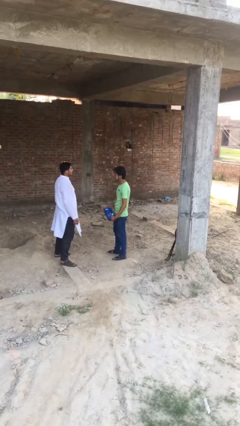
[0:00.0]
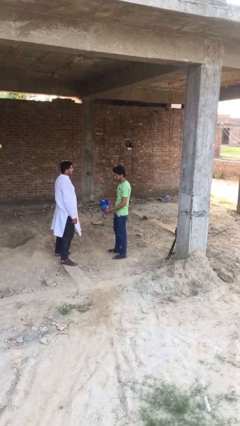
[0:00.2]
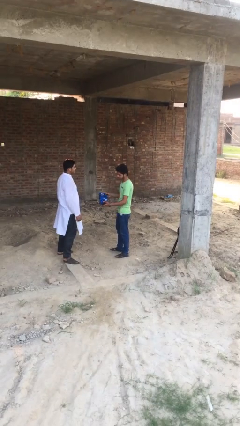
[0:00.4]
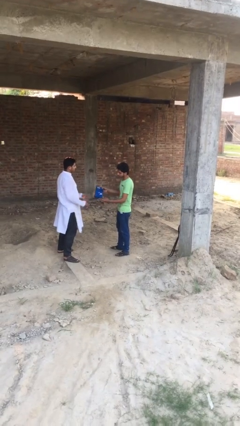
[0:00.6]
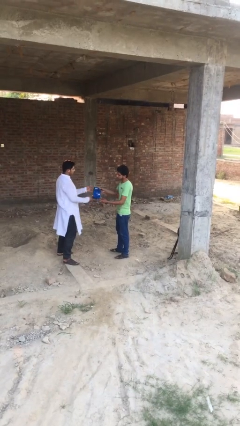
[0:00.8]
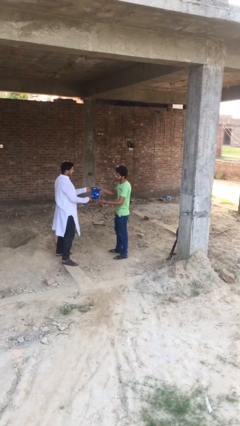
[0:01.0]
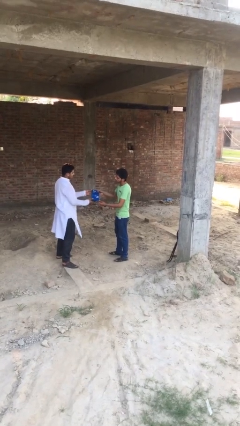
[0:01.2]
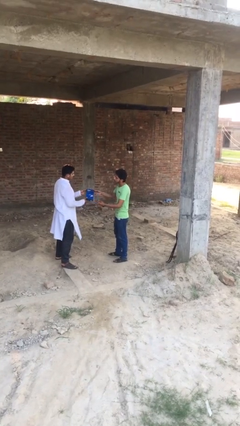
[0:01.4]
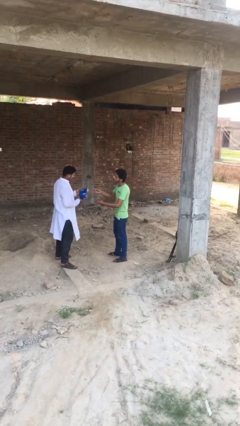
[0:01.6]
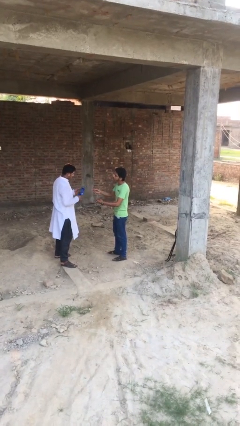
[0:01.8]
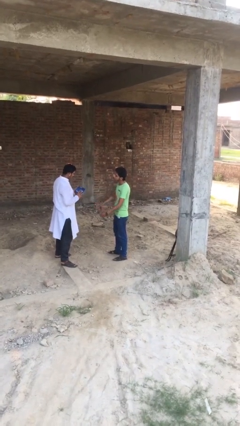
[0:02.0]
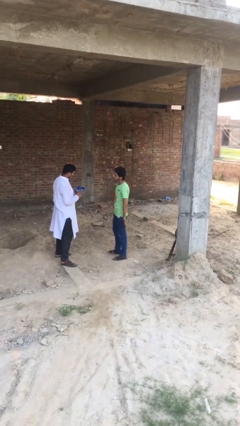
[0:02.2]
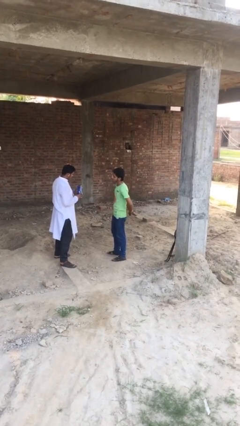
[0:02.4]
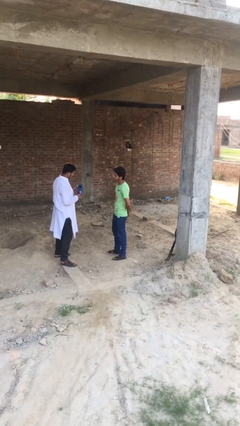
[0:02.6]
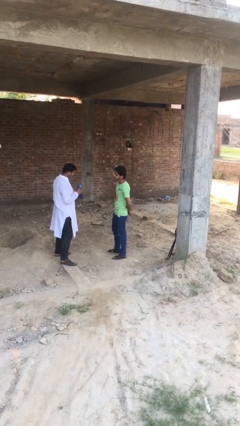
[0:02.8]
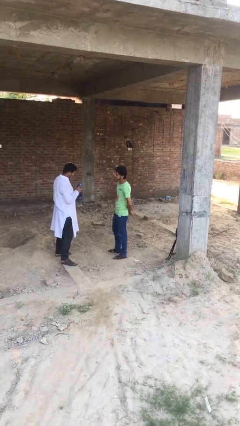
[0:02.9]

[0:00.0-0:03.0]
person transfers object to person

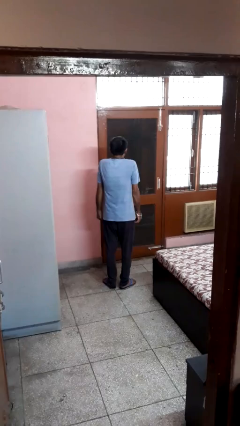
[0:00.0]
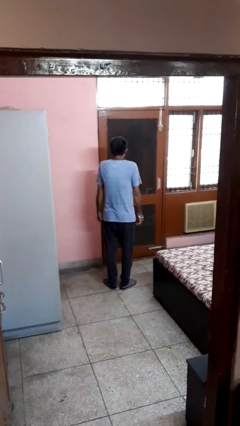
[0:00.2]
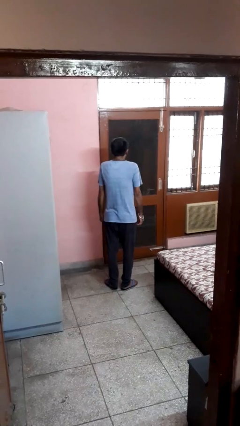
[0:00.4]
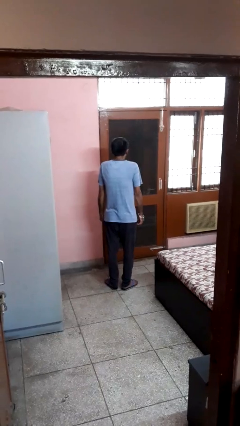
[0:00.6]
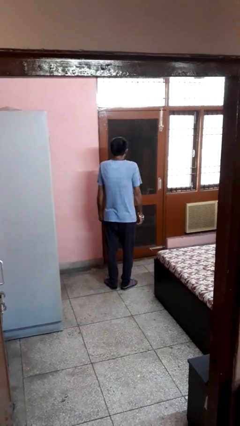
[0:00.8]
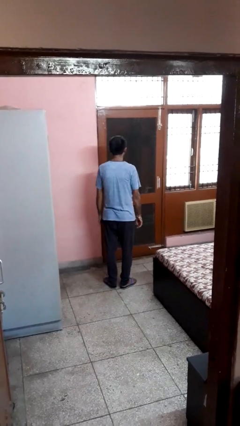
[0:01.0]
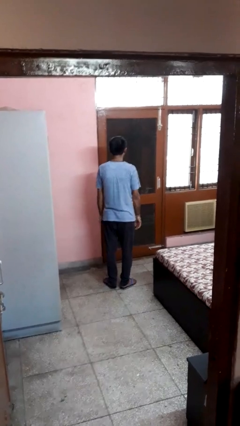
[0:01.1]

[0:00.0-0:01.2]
person shrugs

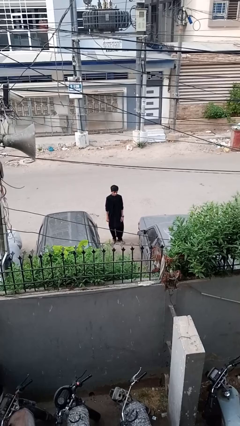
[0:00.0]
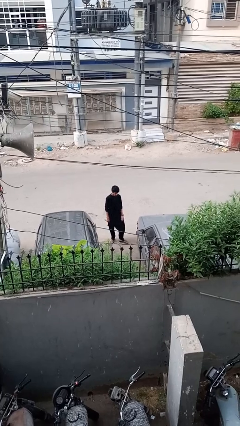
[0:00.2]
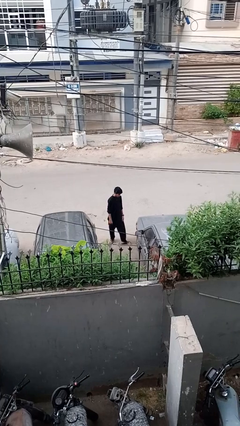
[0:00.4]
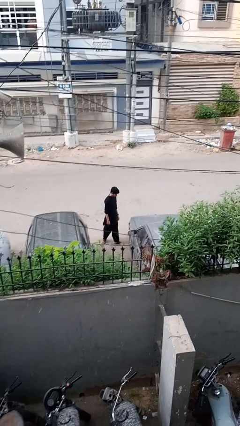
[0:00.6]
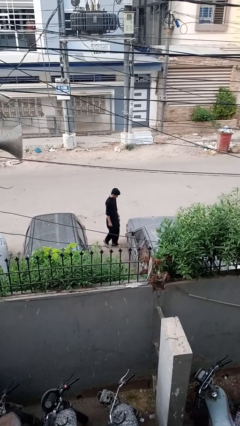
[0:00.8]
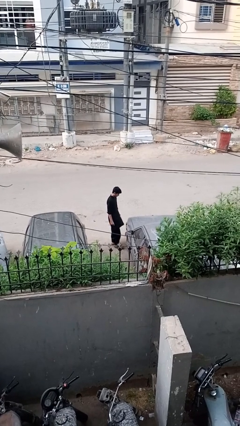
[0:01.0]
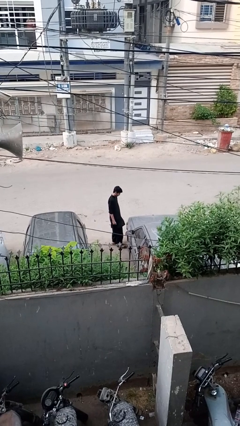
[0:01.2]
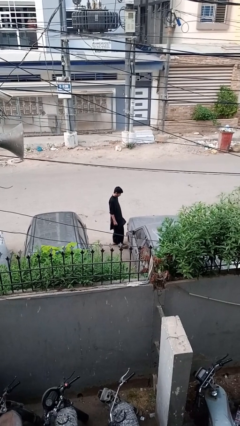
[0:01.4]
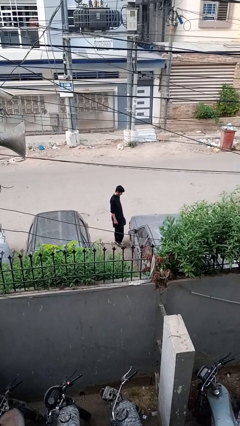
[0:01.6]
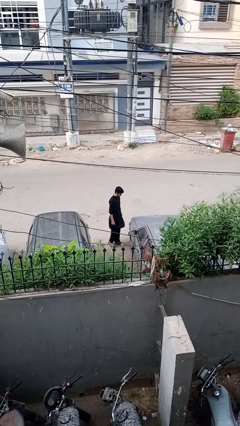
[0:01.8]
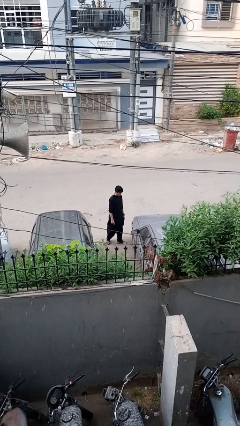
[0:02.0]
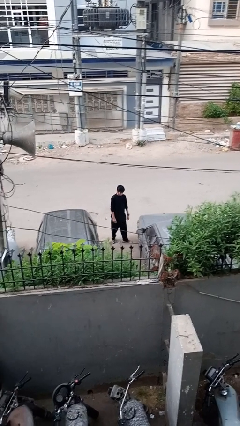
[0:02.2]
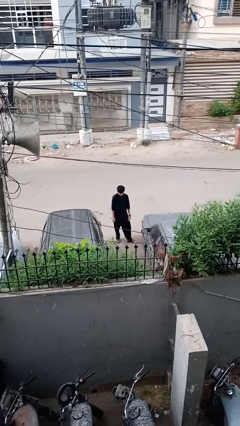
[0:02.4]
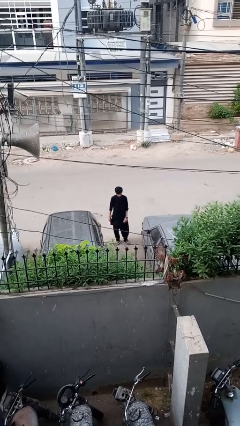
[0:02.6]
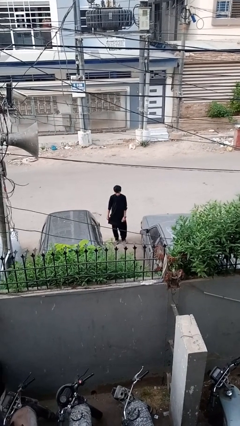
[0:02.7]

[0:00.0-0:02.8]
person kicks car tires

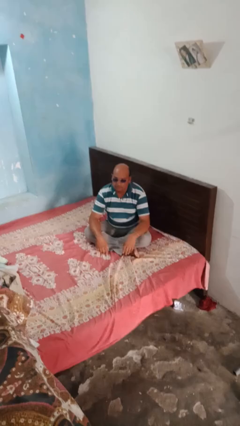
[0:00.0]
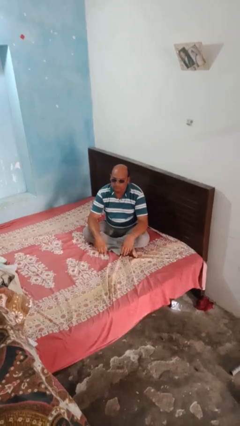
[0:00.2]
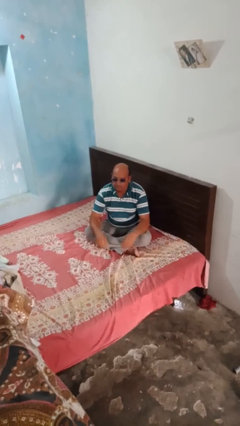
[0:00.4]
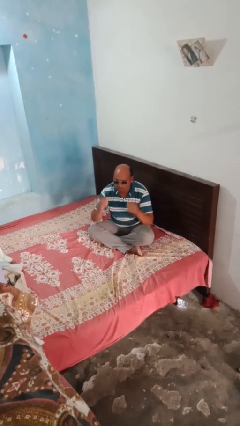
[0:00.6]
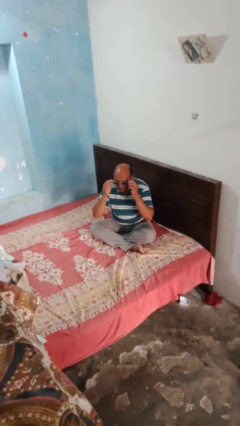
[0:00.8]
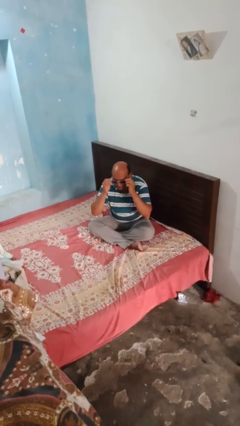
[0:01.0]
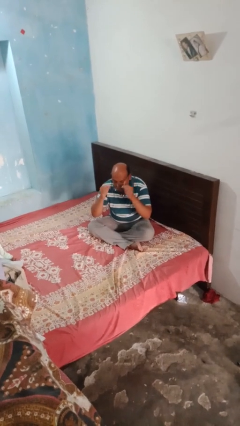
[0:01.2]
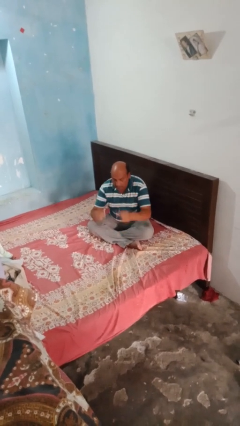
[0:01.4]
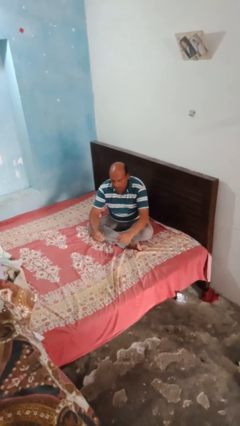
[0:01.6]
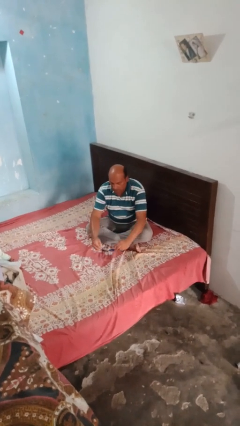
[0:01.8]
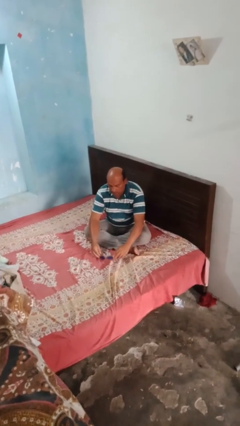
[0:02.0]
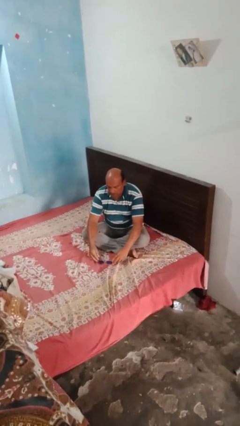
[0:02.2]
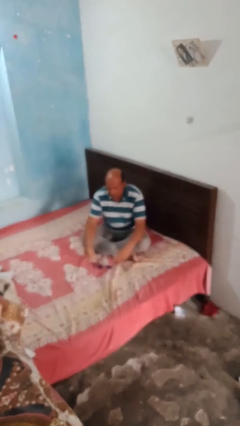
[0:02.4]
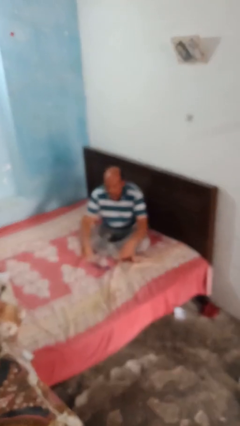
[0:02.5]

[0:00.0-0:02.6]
person takes off sunglasses

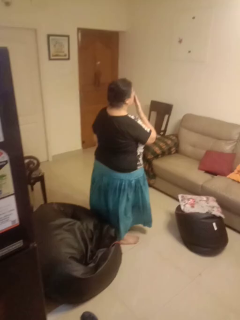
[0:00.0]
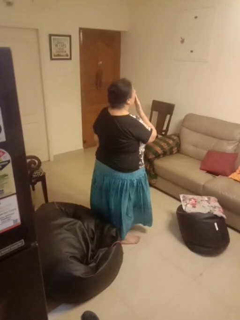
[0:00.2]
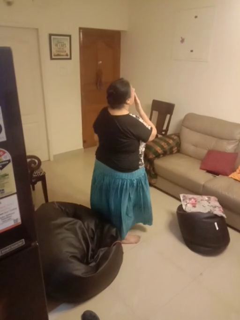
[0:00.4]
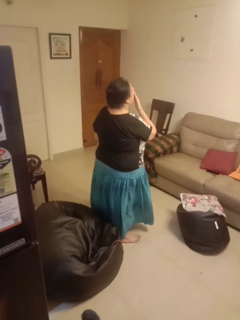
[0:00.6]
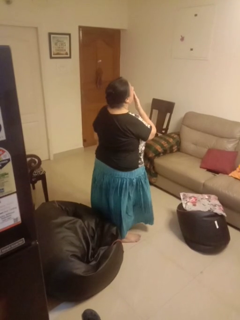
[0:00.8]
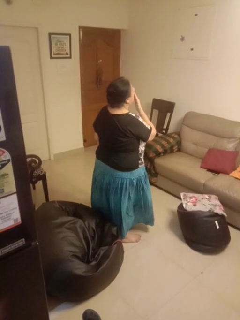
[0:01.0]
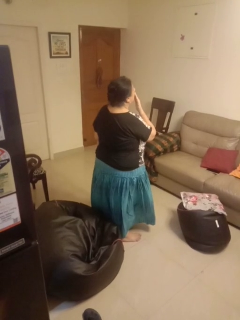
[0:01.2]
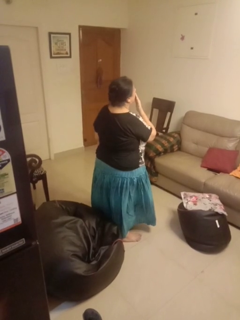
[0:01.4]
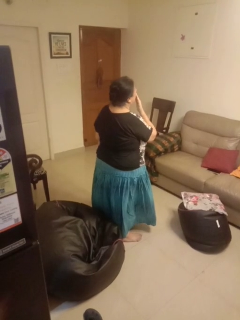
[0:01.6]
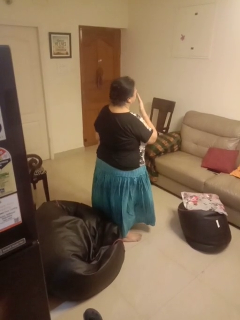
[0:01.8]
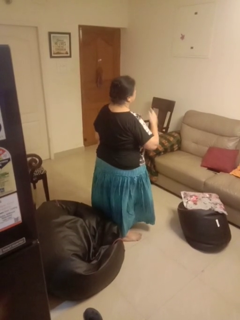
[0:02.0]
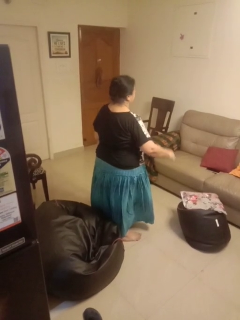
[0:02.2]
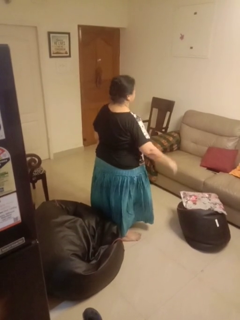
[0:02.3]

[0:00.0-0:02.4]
person yawns

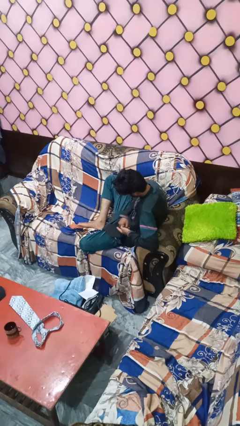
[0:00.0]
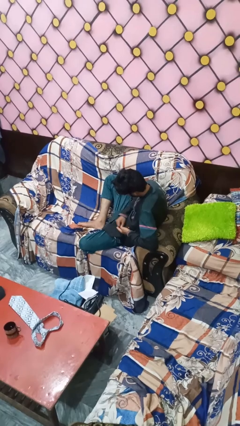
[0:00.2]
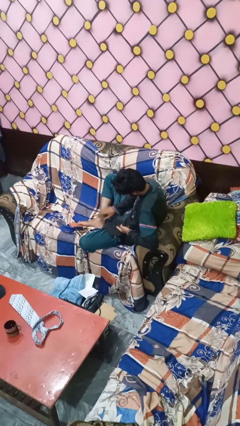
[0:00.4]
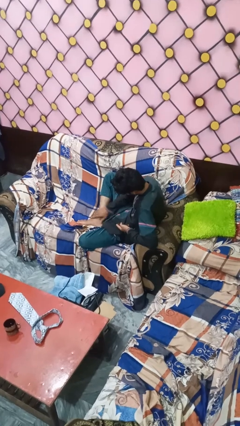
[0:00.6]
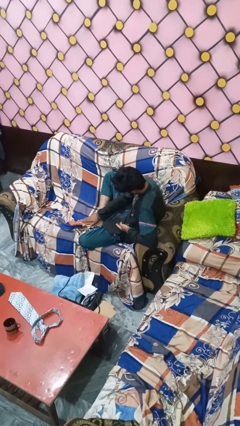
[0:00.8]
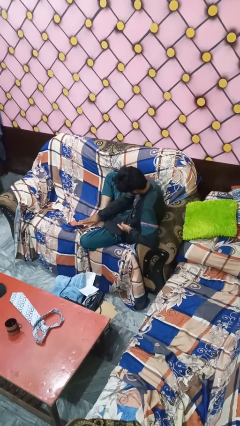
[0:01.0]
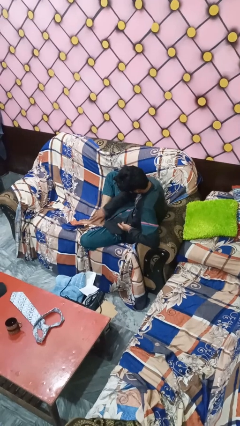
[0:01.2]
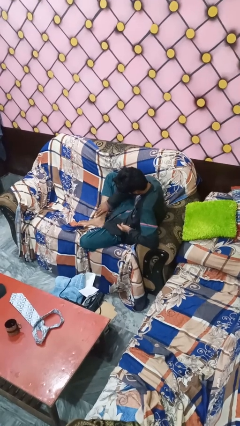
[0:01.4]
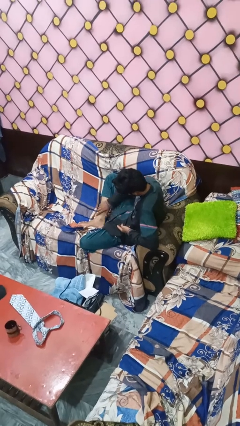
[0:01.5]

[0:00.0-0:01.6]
person rubs foot

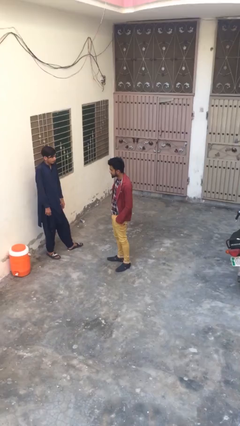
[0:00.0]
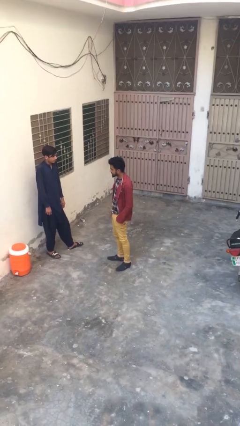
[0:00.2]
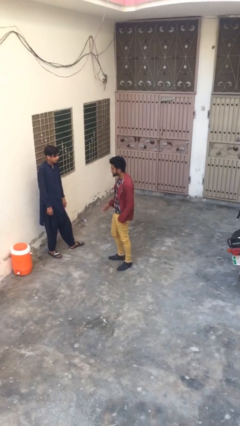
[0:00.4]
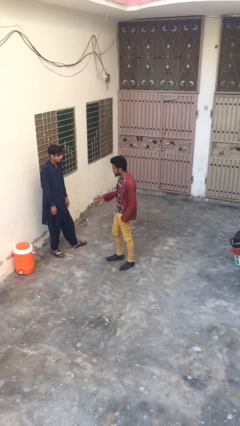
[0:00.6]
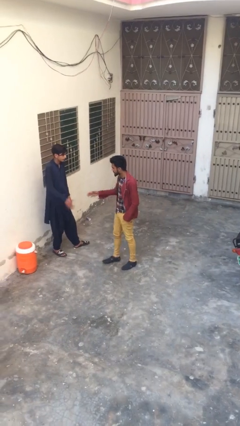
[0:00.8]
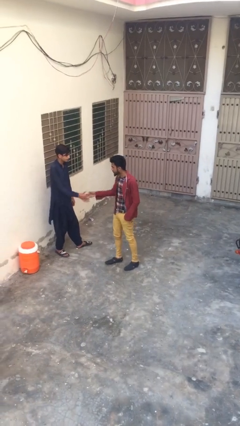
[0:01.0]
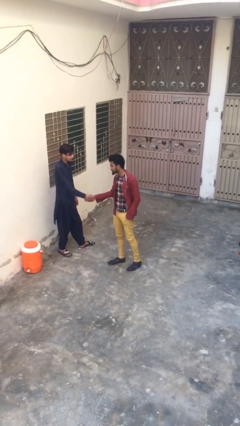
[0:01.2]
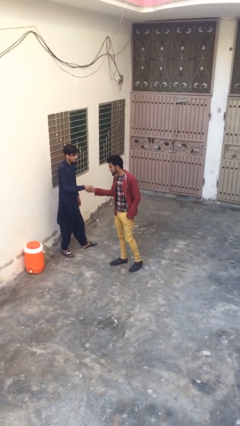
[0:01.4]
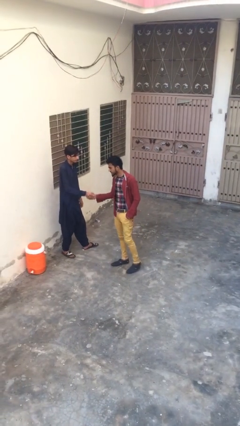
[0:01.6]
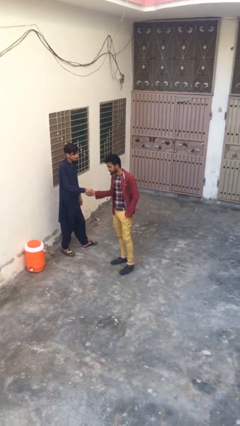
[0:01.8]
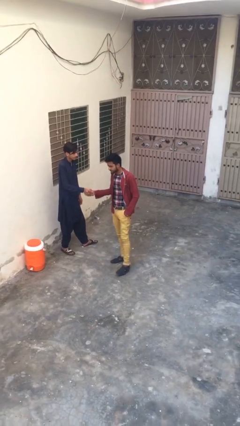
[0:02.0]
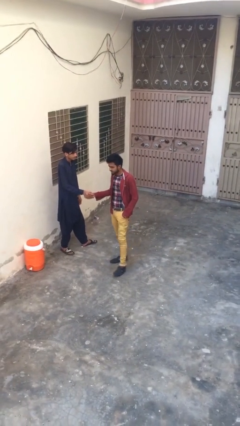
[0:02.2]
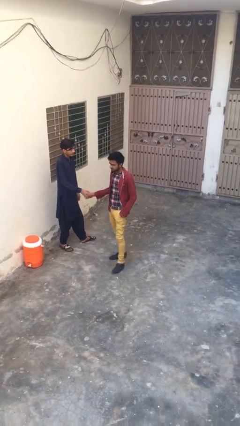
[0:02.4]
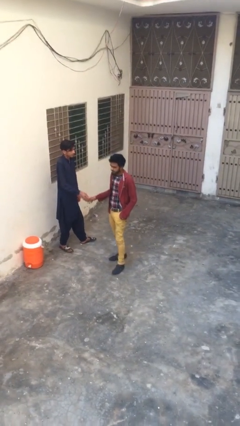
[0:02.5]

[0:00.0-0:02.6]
person shakes hand

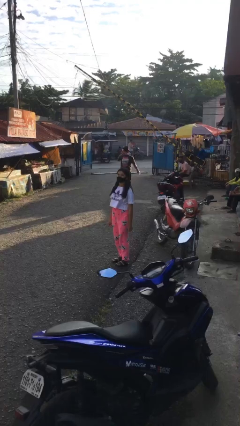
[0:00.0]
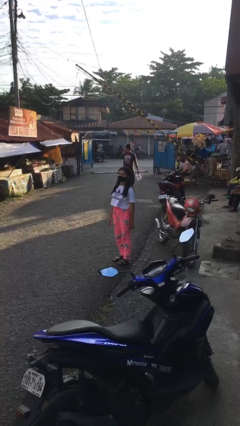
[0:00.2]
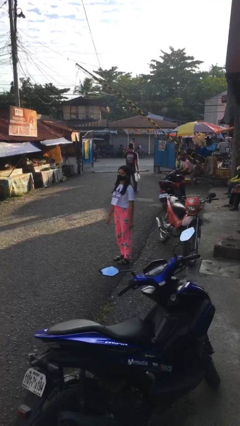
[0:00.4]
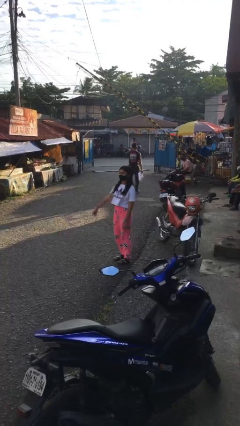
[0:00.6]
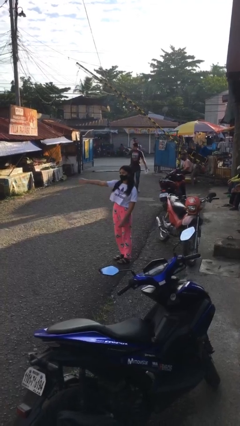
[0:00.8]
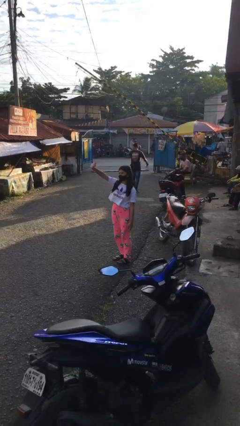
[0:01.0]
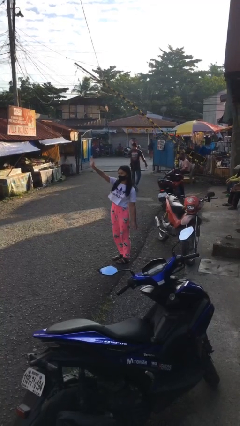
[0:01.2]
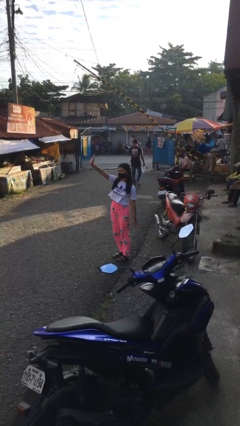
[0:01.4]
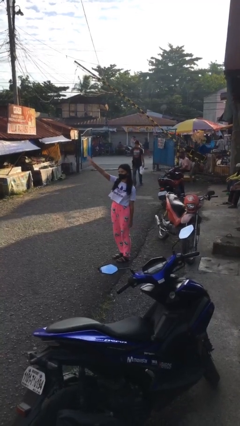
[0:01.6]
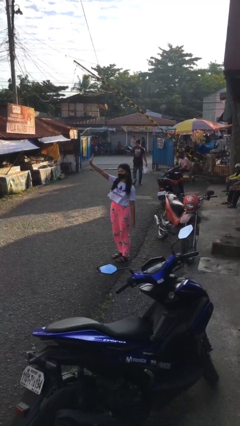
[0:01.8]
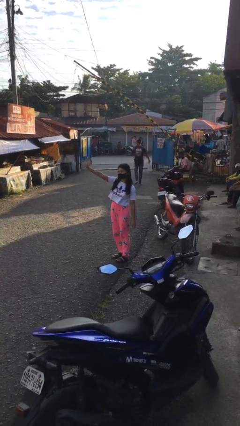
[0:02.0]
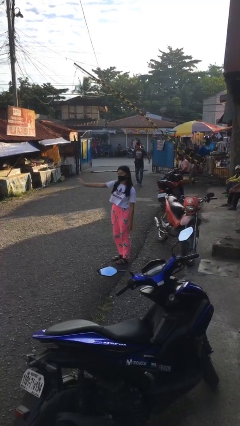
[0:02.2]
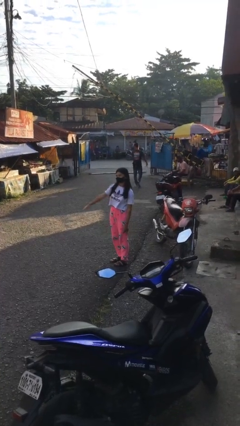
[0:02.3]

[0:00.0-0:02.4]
person waves at person
